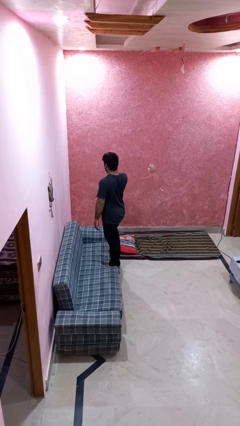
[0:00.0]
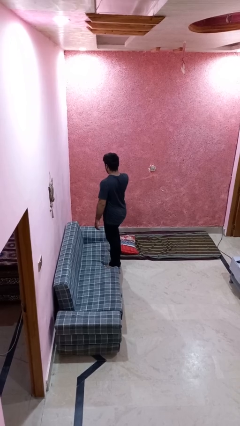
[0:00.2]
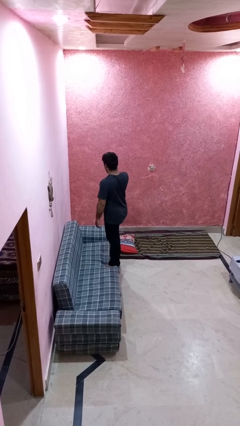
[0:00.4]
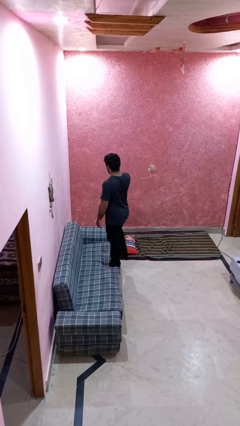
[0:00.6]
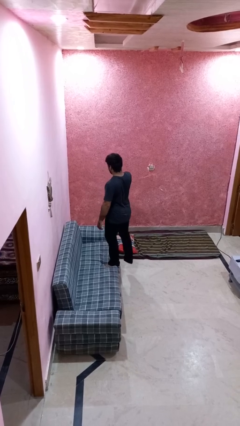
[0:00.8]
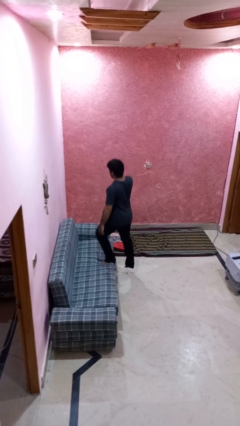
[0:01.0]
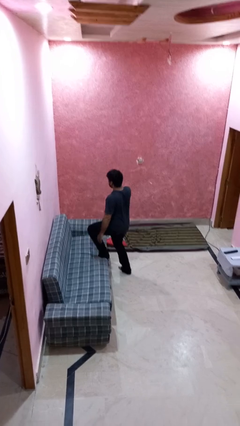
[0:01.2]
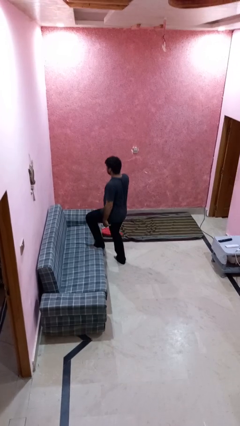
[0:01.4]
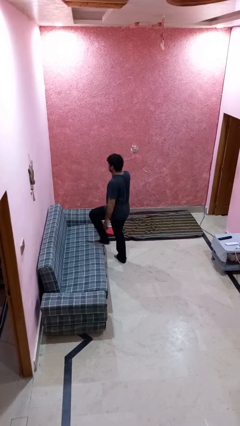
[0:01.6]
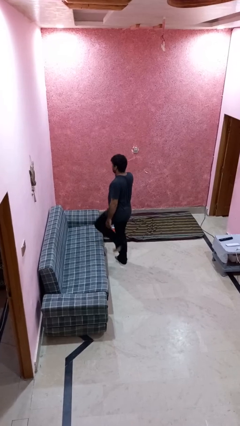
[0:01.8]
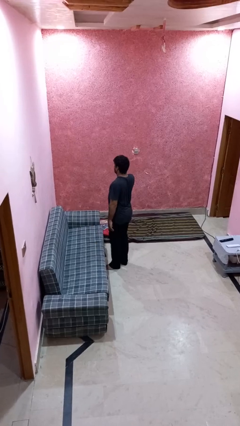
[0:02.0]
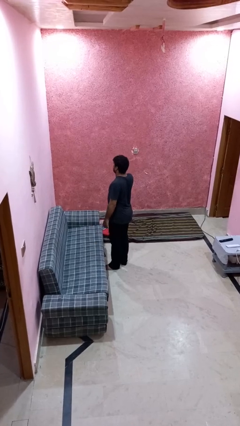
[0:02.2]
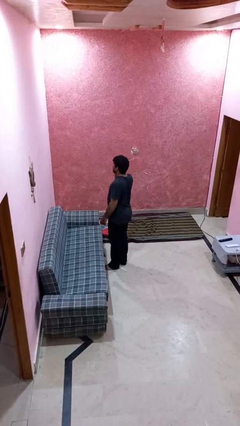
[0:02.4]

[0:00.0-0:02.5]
person climbs off couch

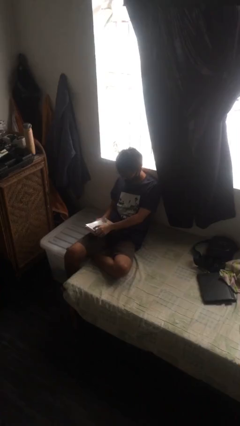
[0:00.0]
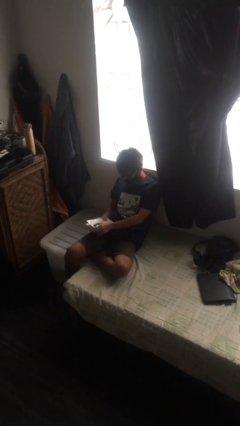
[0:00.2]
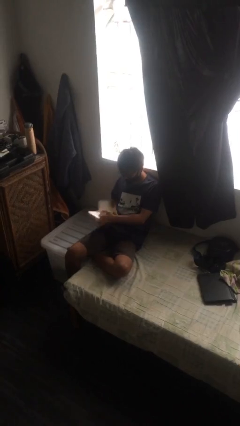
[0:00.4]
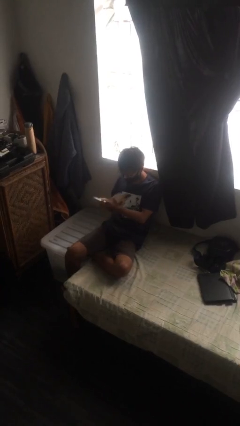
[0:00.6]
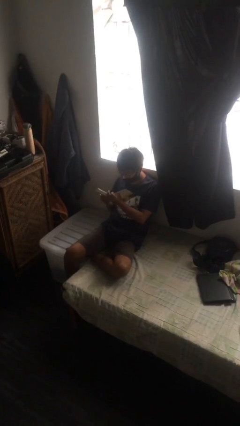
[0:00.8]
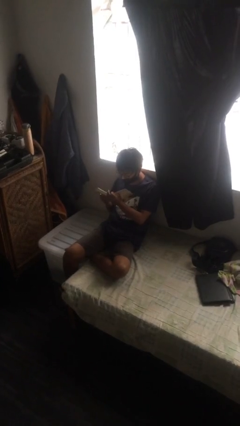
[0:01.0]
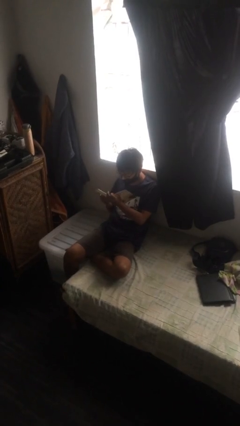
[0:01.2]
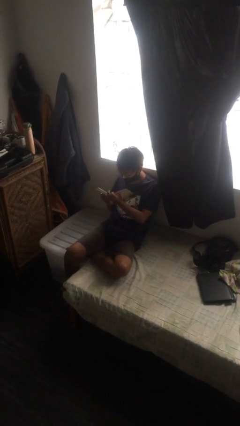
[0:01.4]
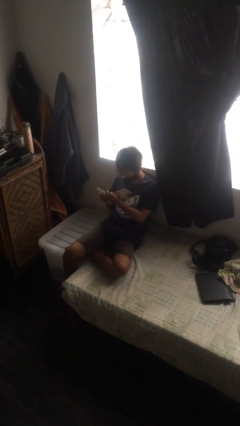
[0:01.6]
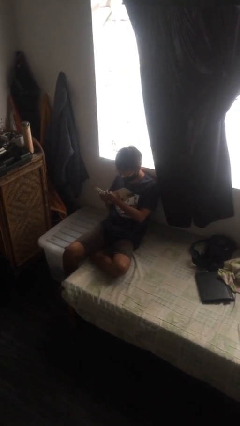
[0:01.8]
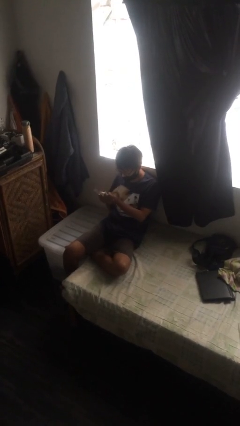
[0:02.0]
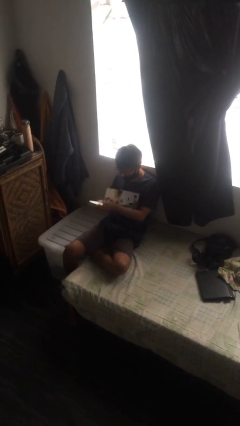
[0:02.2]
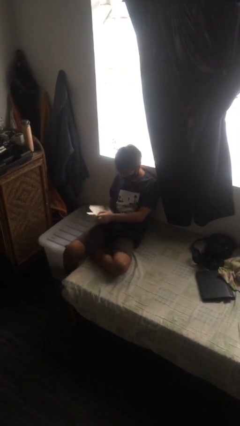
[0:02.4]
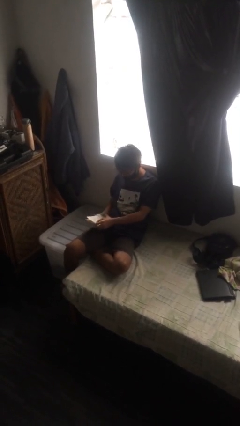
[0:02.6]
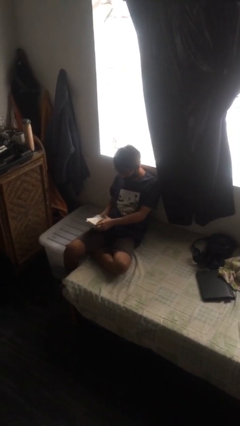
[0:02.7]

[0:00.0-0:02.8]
person reads document

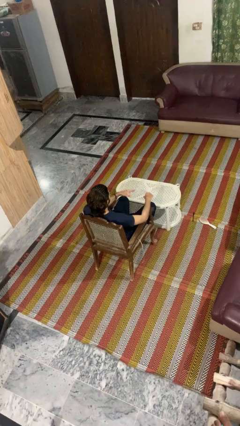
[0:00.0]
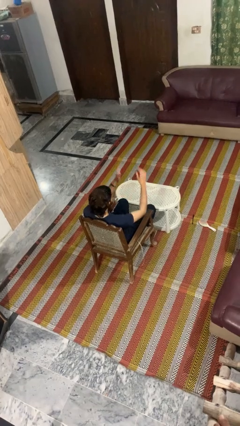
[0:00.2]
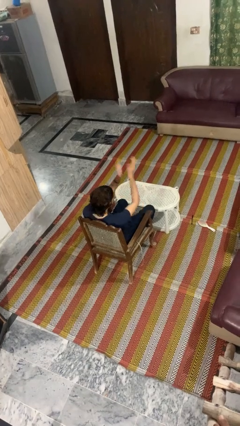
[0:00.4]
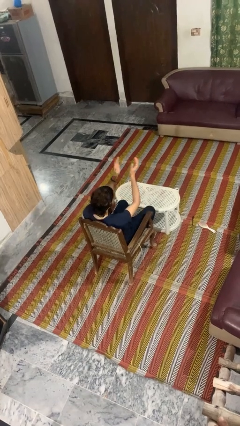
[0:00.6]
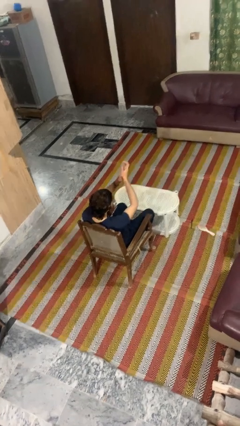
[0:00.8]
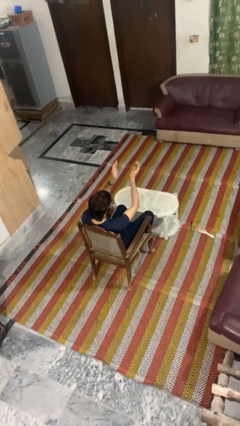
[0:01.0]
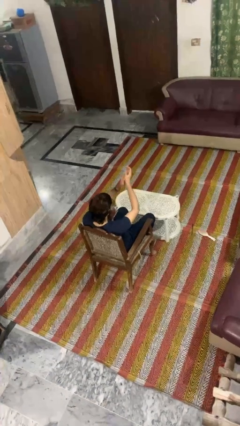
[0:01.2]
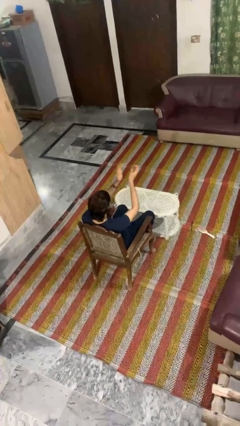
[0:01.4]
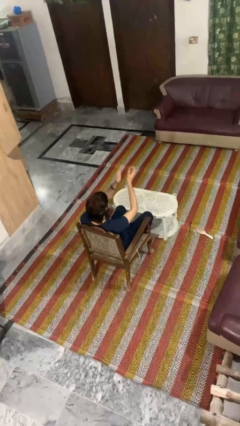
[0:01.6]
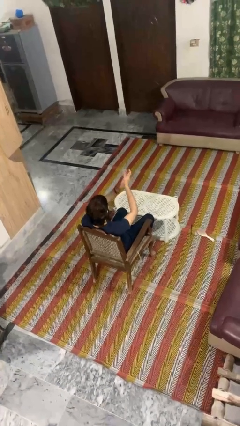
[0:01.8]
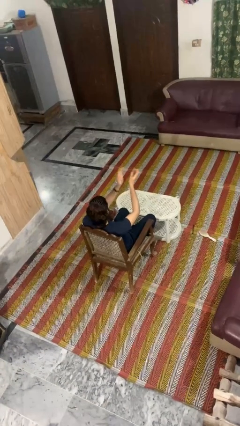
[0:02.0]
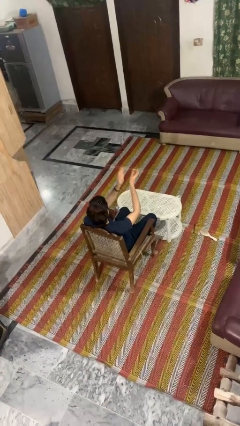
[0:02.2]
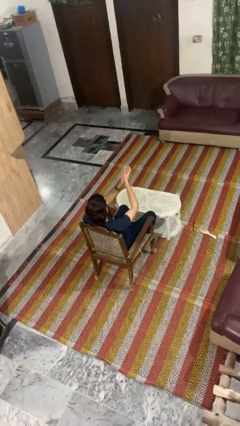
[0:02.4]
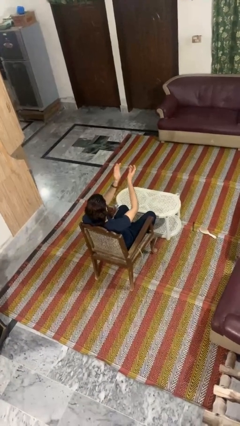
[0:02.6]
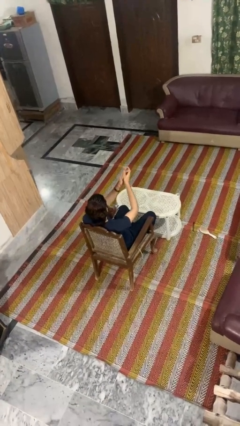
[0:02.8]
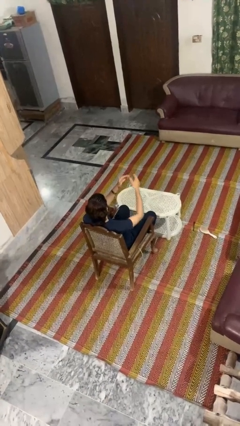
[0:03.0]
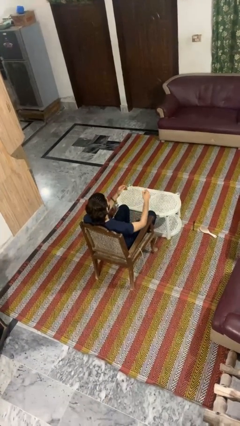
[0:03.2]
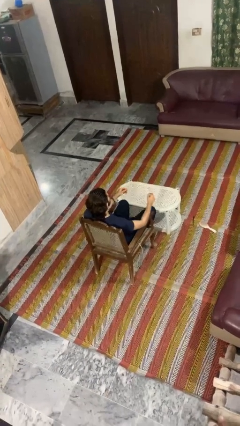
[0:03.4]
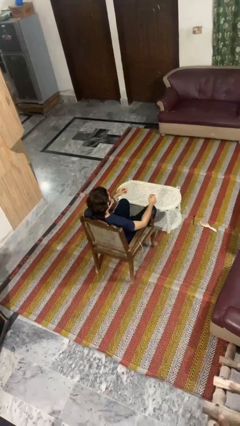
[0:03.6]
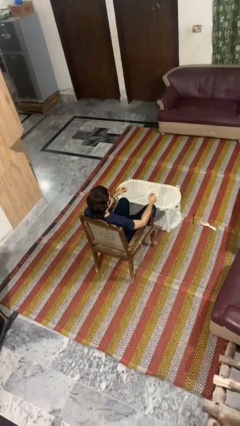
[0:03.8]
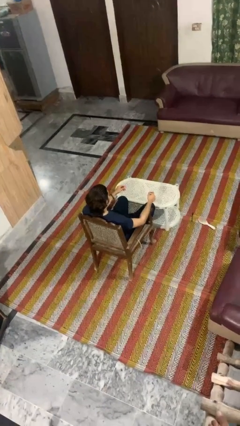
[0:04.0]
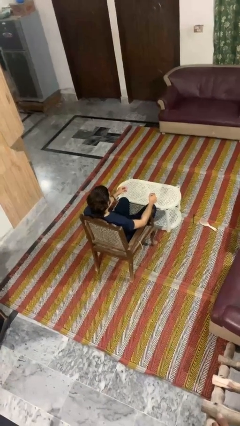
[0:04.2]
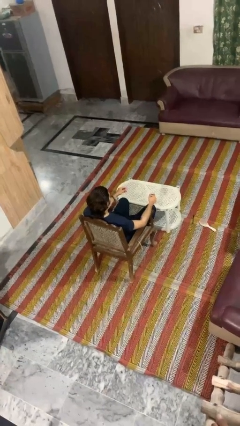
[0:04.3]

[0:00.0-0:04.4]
person claps hands

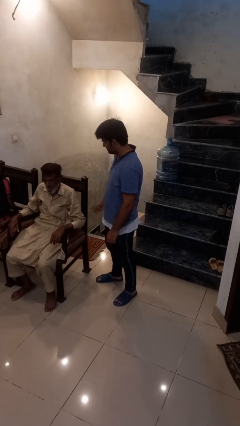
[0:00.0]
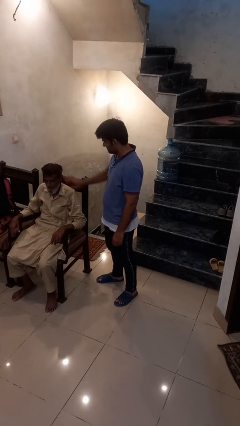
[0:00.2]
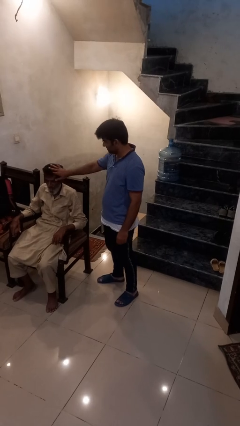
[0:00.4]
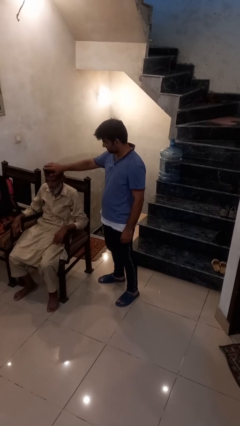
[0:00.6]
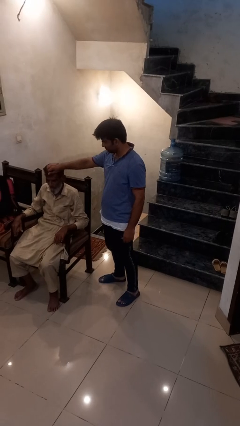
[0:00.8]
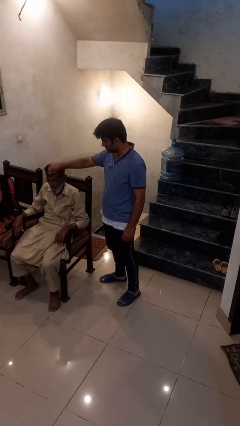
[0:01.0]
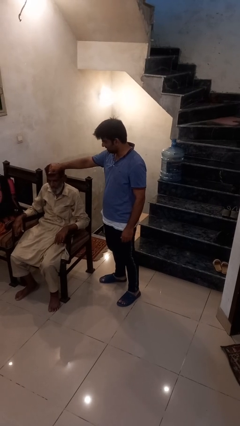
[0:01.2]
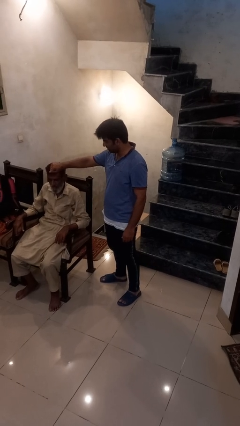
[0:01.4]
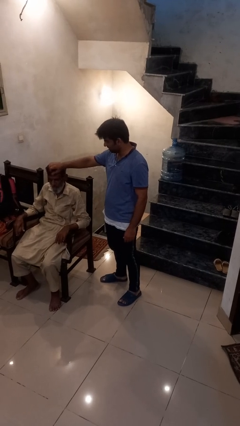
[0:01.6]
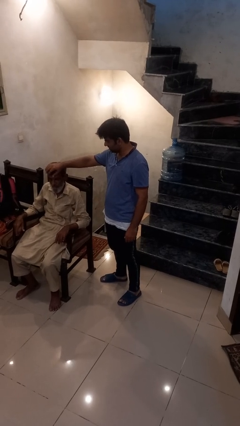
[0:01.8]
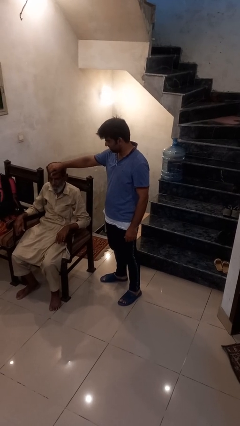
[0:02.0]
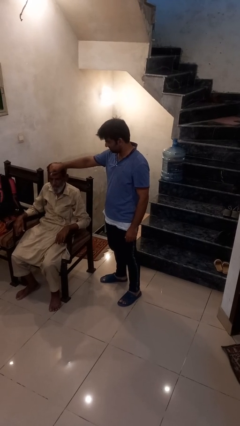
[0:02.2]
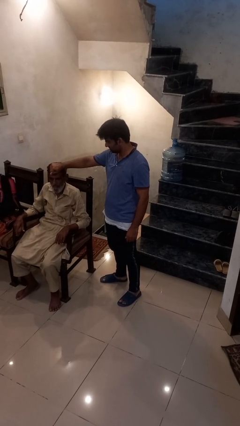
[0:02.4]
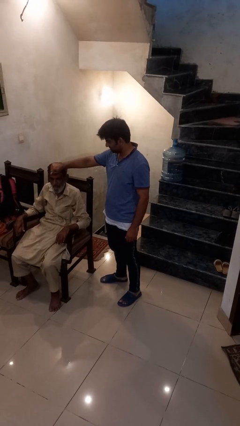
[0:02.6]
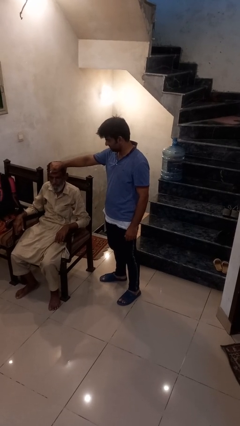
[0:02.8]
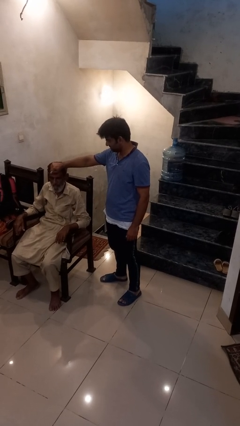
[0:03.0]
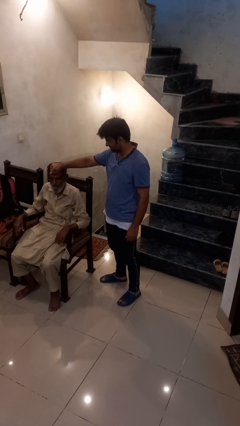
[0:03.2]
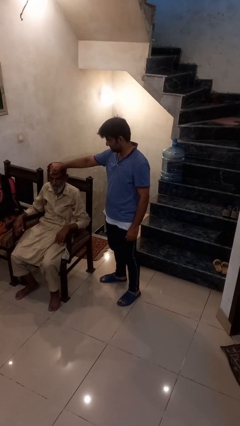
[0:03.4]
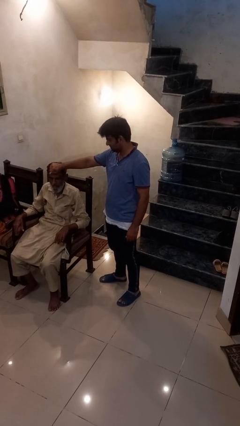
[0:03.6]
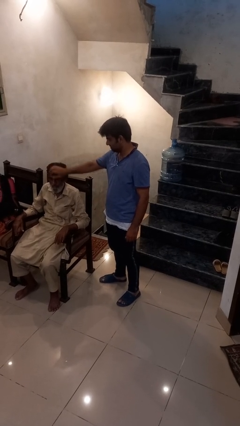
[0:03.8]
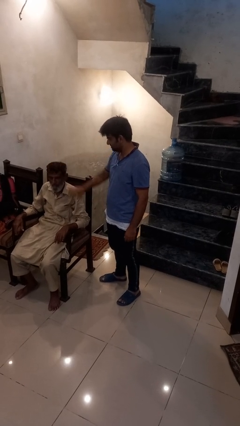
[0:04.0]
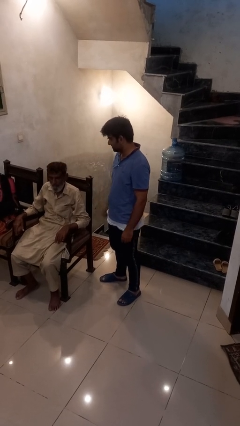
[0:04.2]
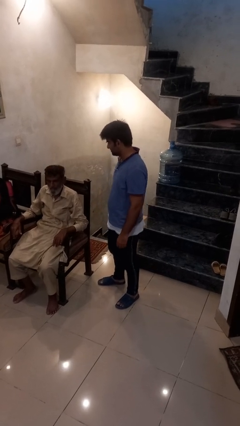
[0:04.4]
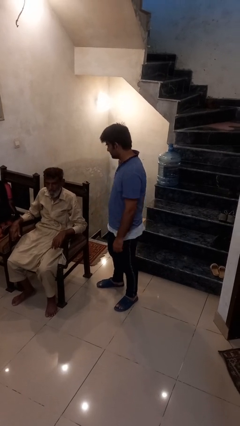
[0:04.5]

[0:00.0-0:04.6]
person grabs person by hair

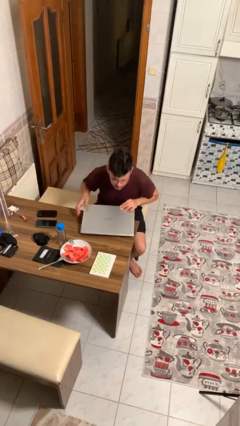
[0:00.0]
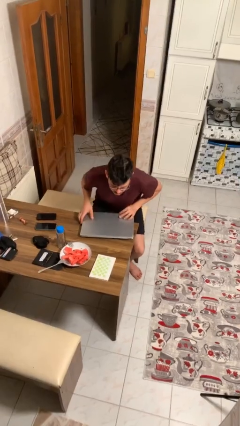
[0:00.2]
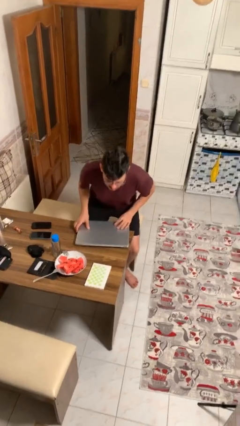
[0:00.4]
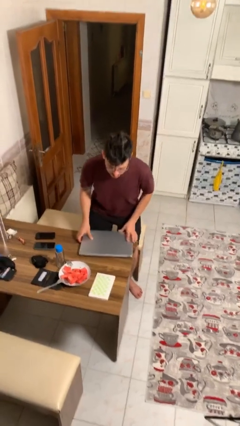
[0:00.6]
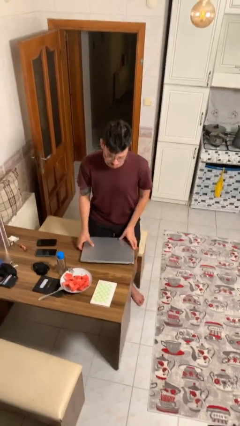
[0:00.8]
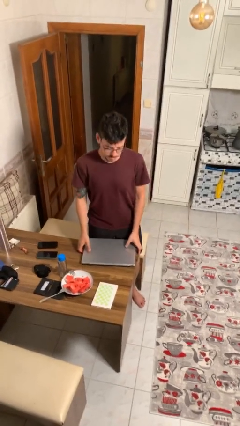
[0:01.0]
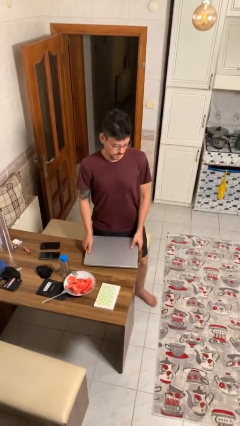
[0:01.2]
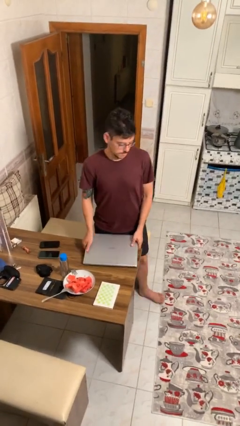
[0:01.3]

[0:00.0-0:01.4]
person stands up

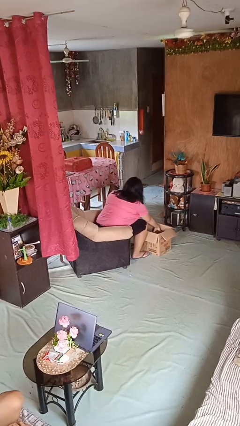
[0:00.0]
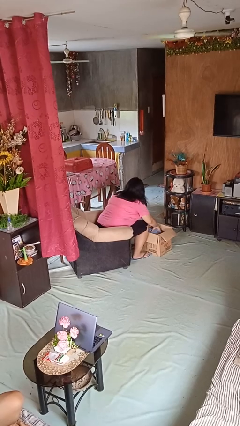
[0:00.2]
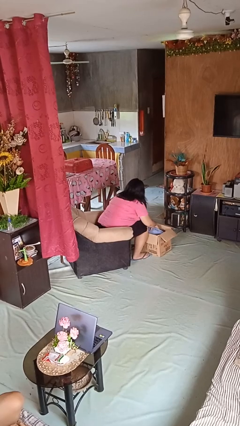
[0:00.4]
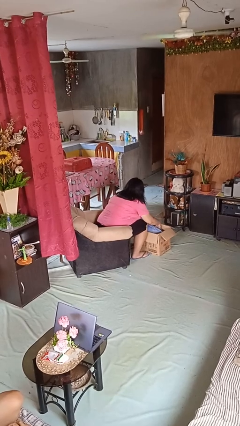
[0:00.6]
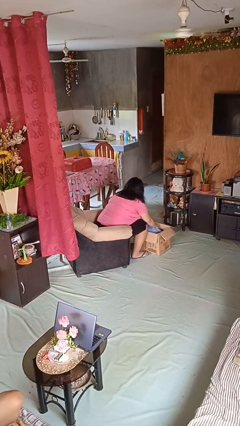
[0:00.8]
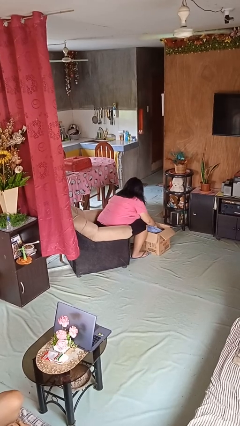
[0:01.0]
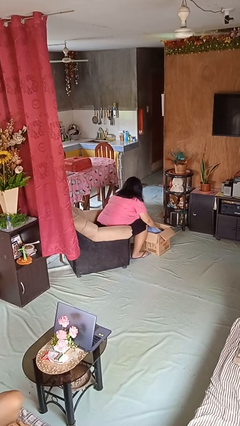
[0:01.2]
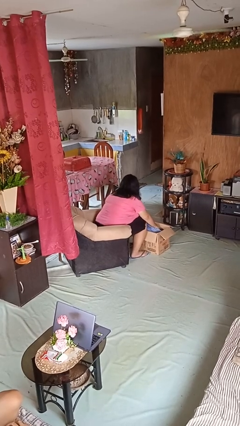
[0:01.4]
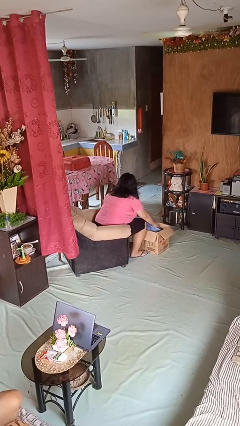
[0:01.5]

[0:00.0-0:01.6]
person searches in box
